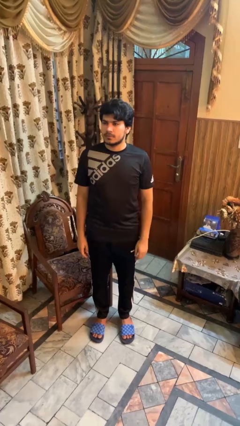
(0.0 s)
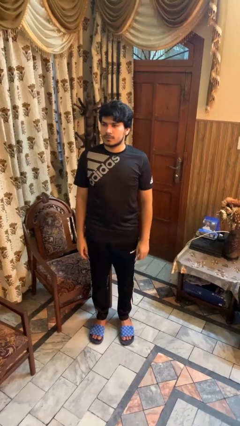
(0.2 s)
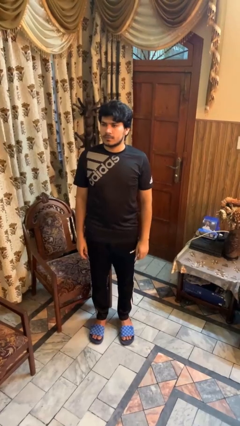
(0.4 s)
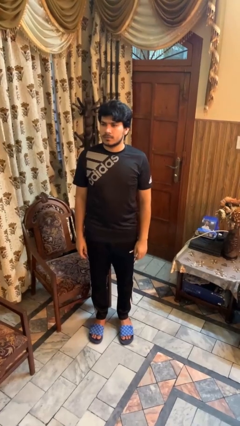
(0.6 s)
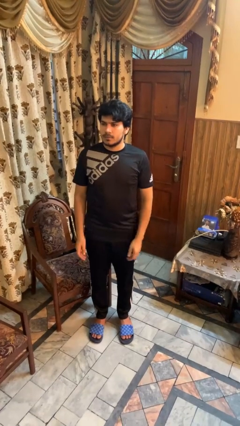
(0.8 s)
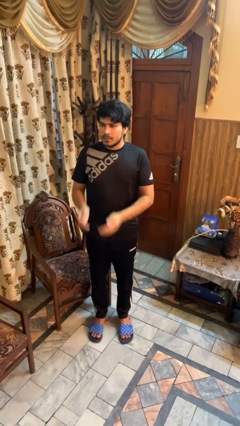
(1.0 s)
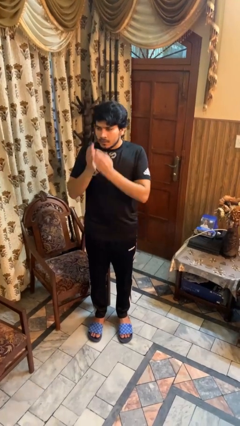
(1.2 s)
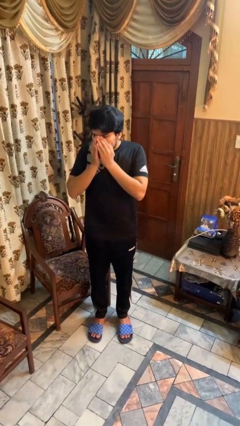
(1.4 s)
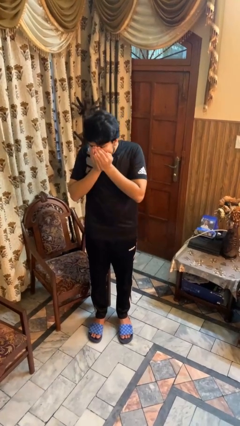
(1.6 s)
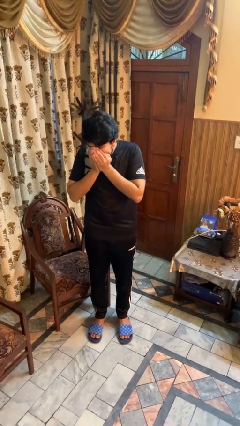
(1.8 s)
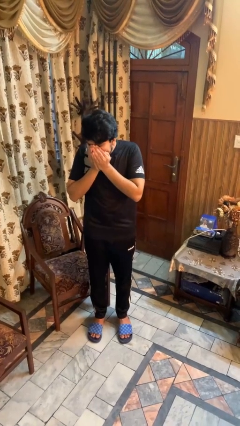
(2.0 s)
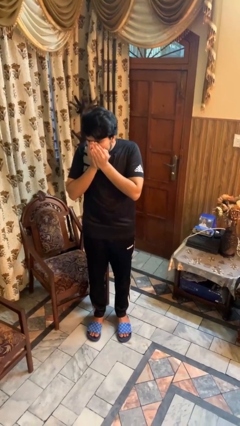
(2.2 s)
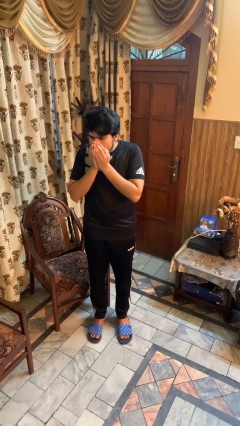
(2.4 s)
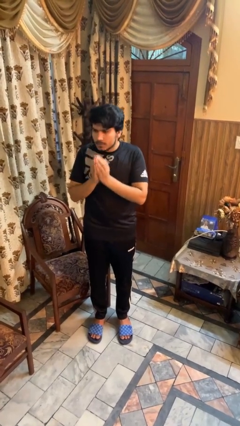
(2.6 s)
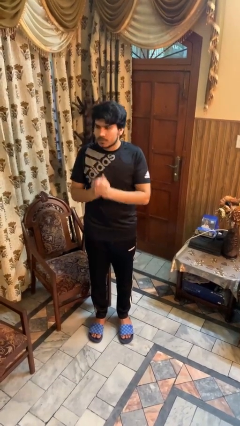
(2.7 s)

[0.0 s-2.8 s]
person sneezes into hand

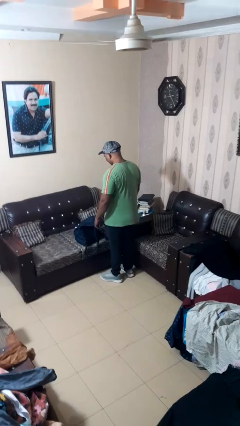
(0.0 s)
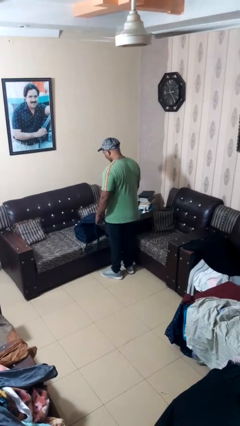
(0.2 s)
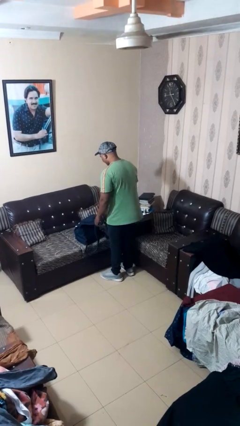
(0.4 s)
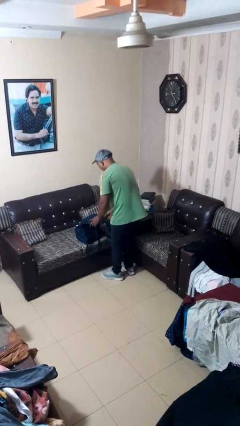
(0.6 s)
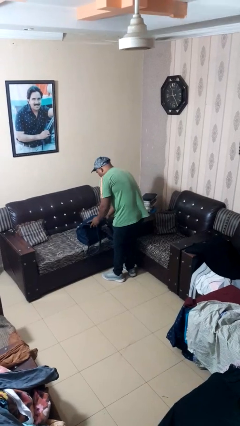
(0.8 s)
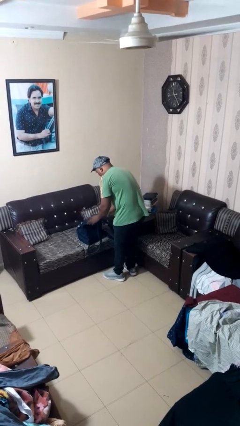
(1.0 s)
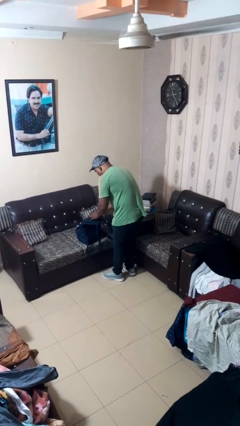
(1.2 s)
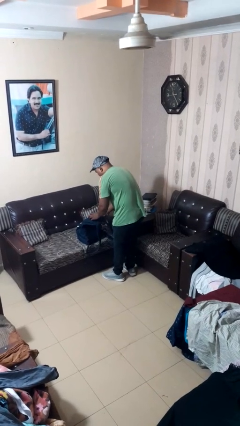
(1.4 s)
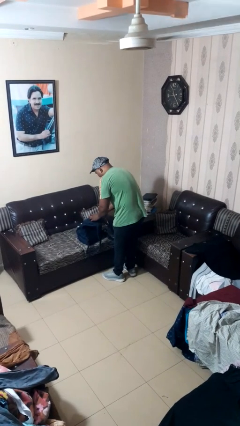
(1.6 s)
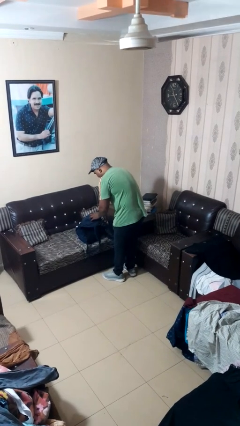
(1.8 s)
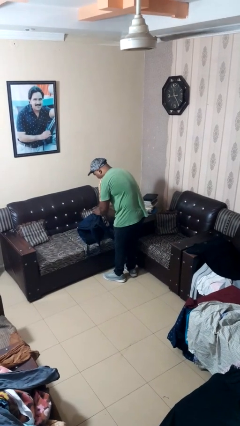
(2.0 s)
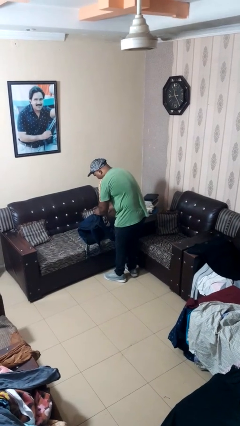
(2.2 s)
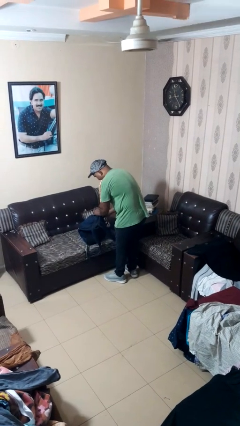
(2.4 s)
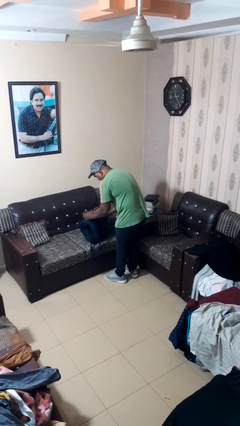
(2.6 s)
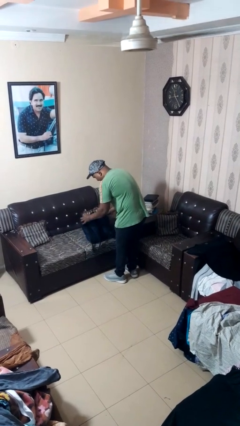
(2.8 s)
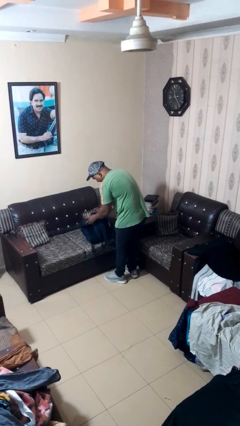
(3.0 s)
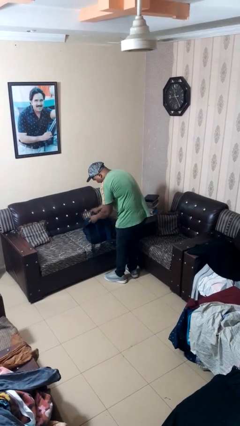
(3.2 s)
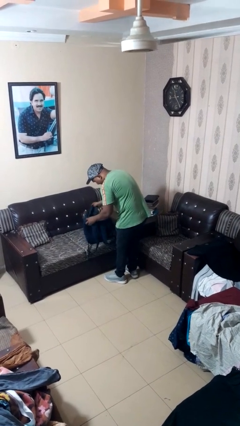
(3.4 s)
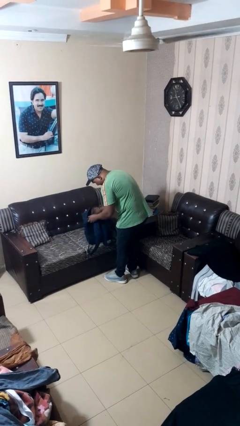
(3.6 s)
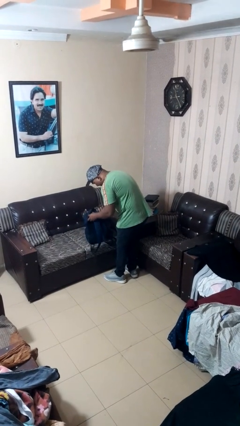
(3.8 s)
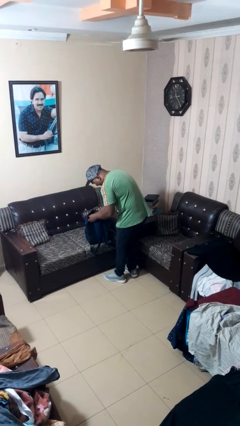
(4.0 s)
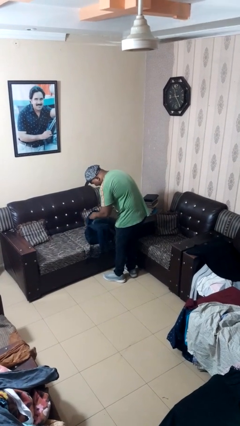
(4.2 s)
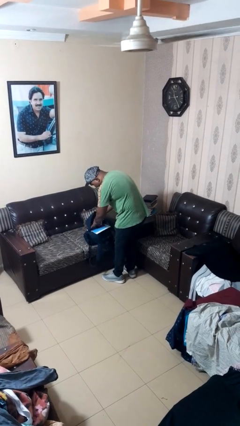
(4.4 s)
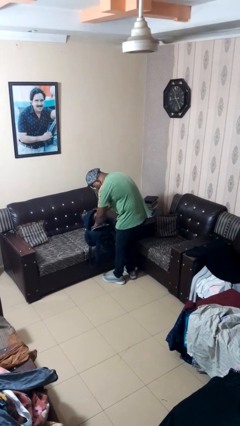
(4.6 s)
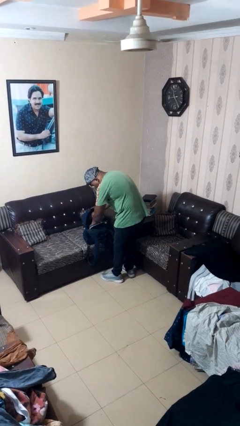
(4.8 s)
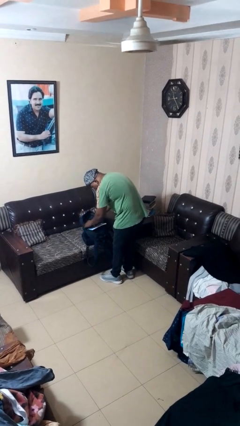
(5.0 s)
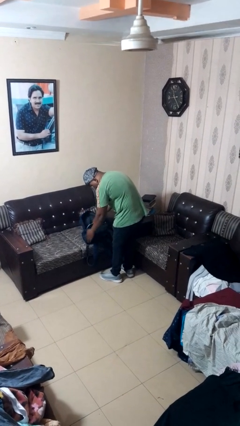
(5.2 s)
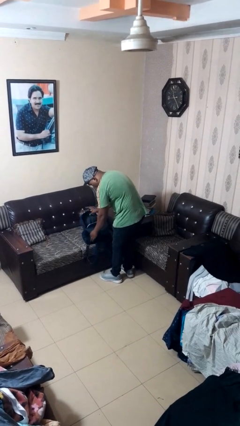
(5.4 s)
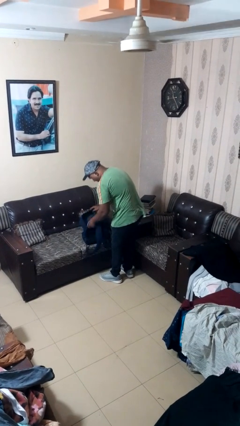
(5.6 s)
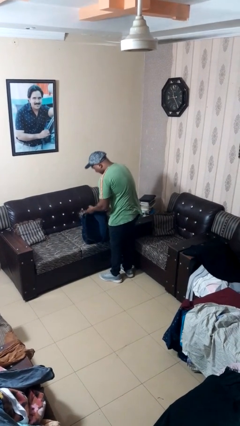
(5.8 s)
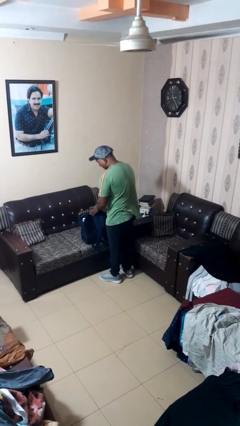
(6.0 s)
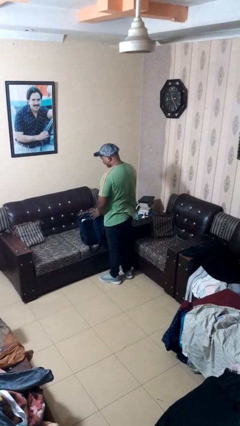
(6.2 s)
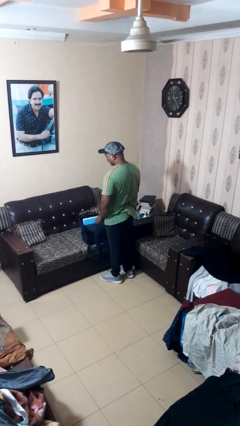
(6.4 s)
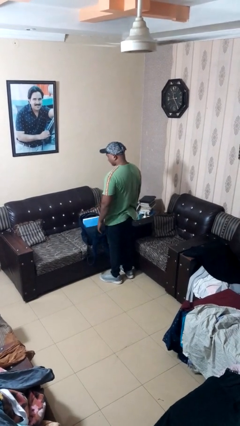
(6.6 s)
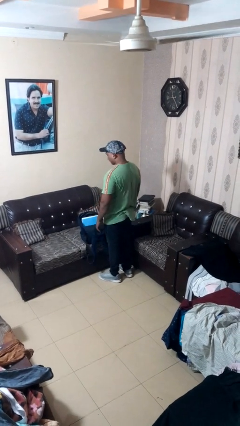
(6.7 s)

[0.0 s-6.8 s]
person searches in bag

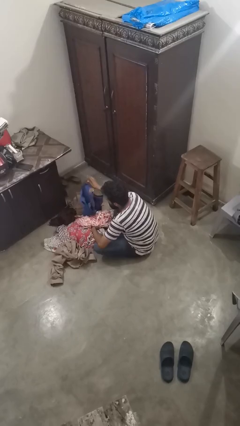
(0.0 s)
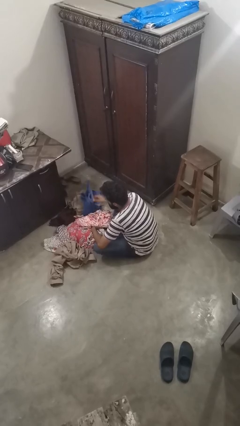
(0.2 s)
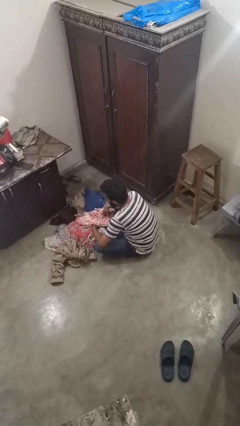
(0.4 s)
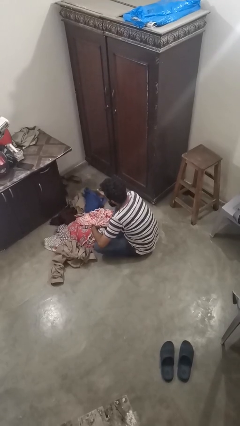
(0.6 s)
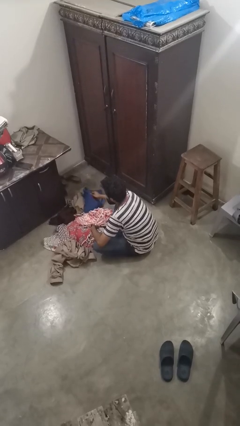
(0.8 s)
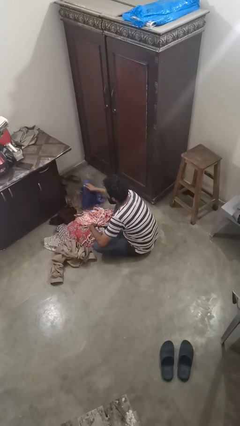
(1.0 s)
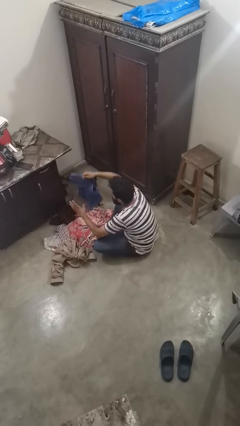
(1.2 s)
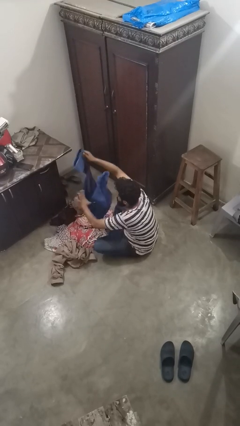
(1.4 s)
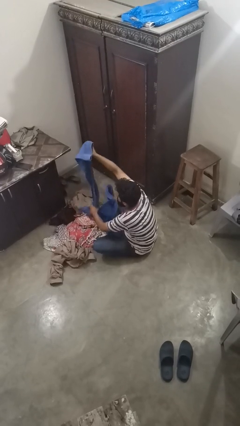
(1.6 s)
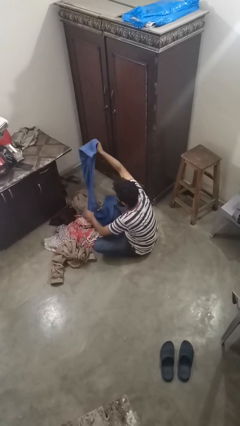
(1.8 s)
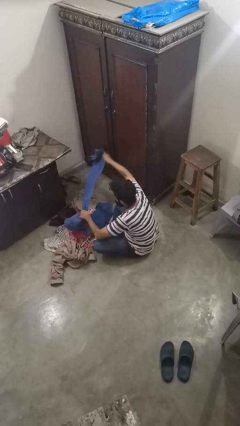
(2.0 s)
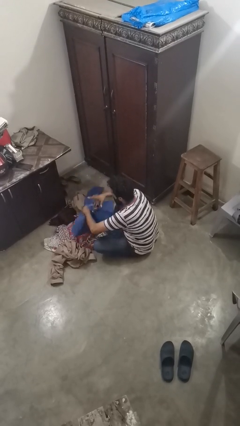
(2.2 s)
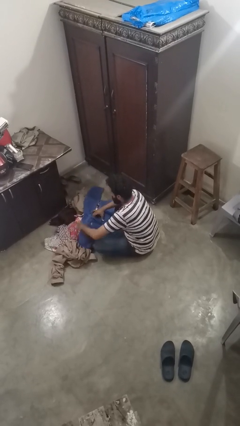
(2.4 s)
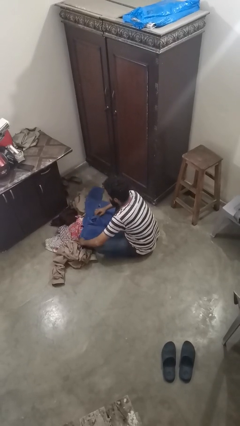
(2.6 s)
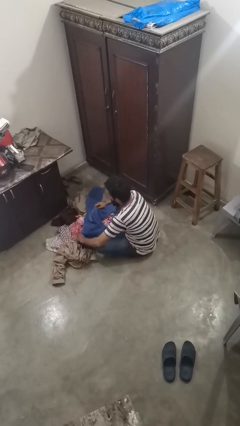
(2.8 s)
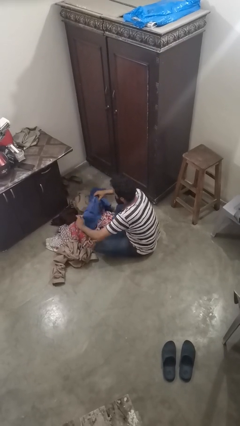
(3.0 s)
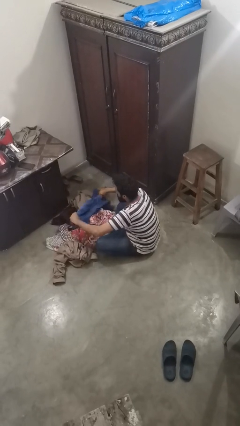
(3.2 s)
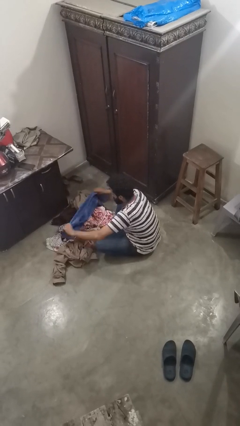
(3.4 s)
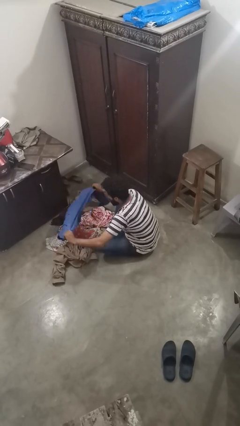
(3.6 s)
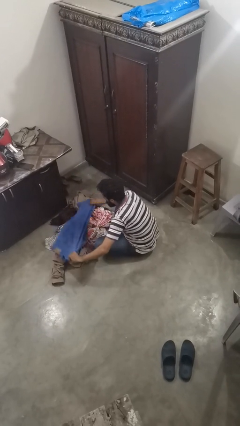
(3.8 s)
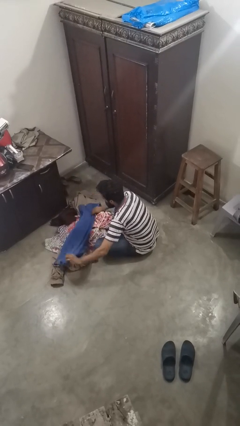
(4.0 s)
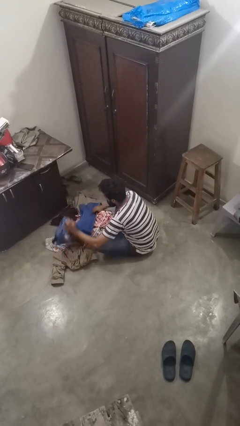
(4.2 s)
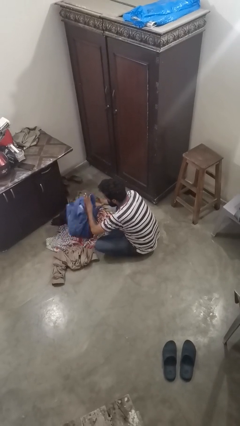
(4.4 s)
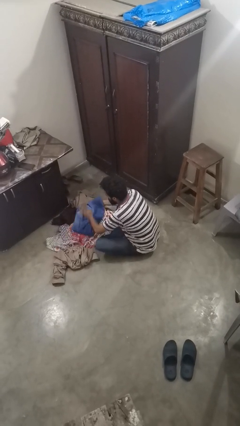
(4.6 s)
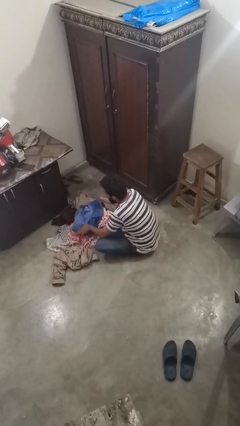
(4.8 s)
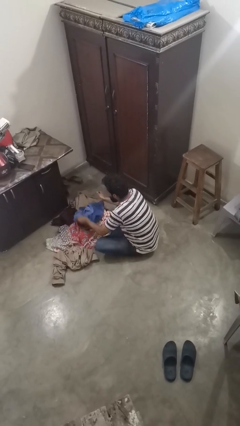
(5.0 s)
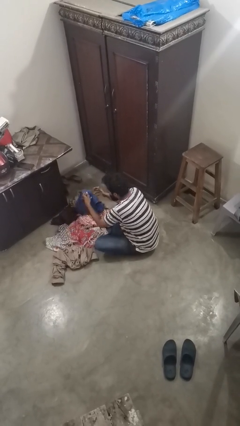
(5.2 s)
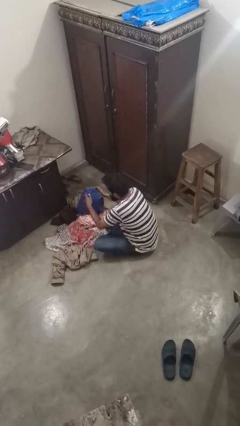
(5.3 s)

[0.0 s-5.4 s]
person folds pants

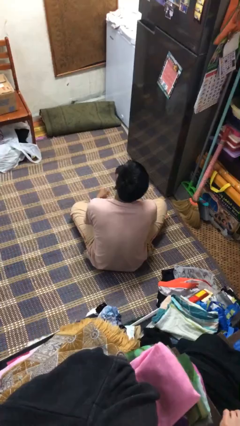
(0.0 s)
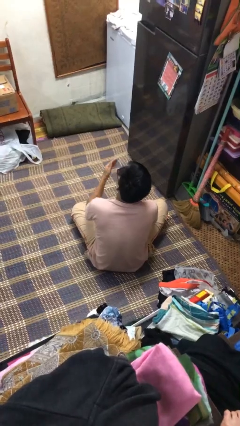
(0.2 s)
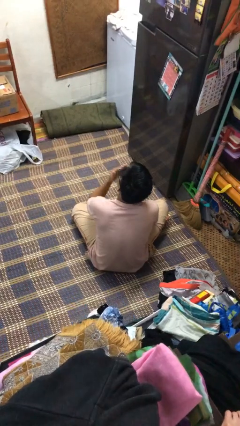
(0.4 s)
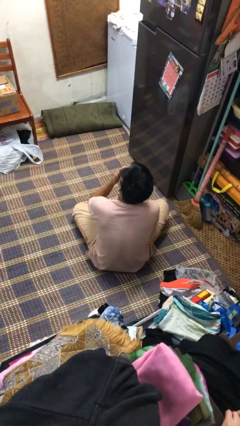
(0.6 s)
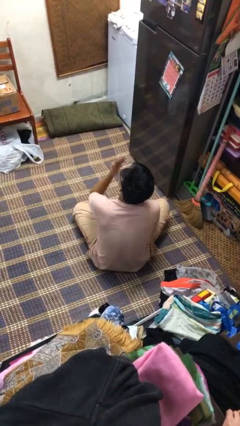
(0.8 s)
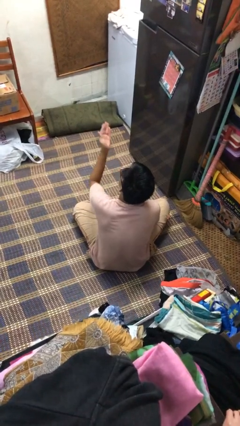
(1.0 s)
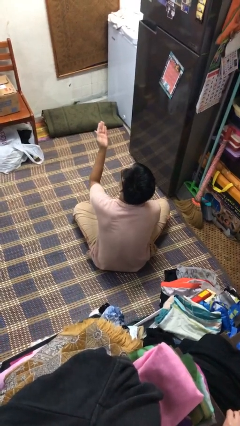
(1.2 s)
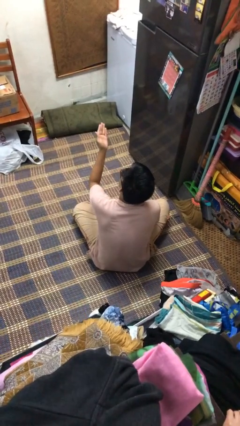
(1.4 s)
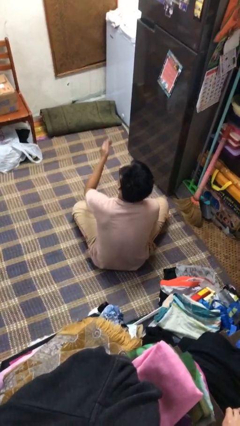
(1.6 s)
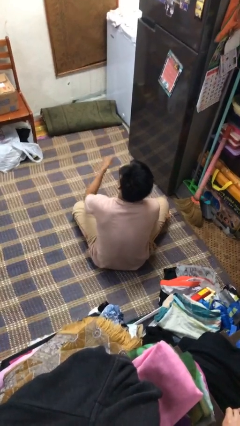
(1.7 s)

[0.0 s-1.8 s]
person gestures blow kiss

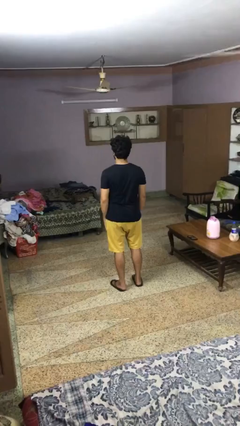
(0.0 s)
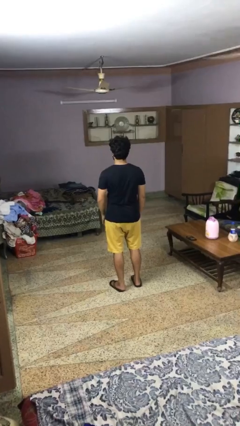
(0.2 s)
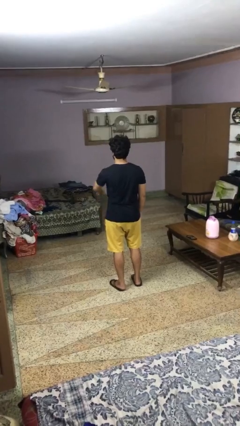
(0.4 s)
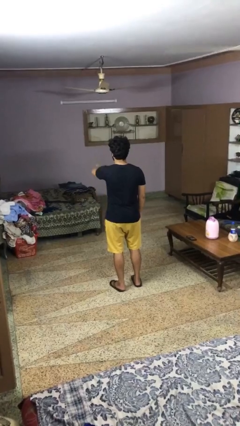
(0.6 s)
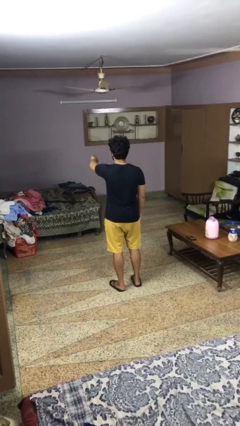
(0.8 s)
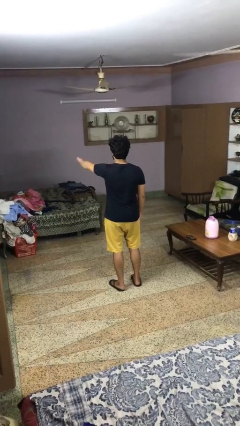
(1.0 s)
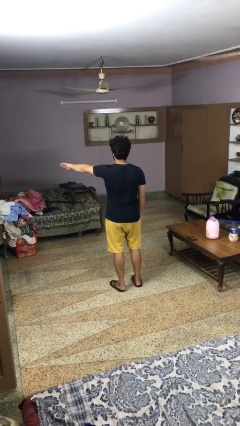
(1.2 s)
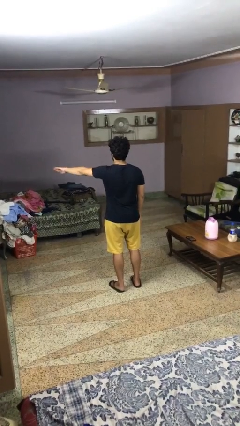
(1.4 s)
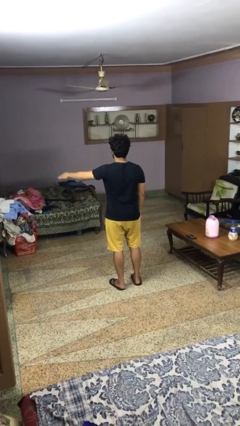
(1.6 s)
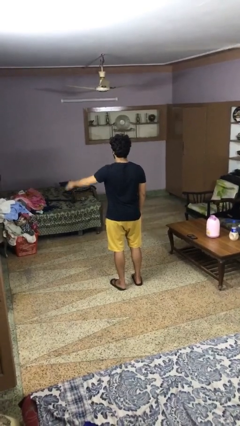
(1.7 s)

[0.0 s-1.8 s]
person gestures swipe left
